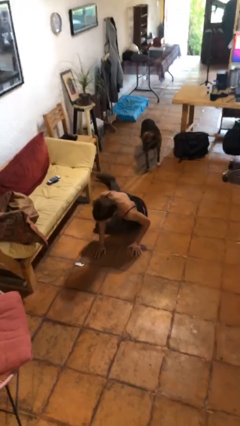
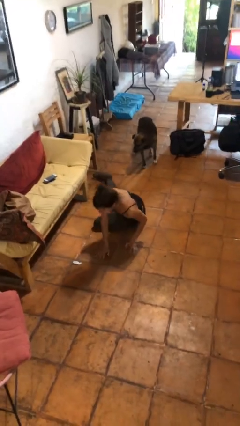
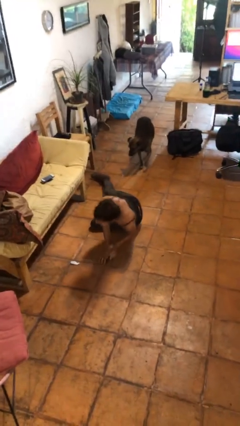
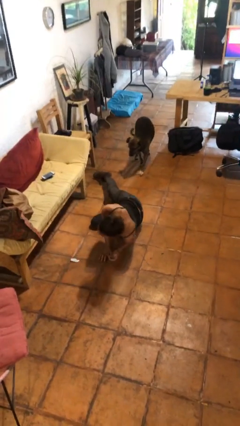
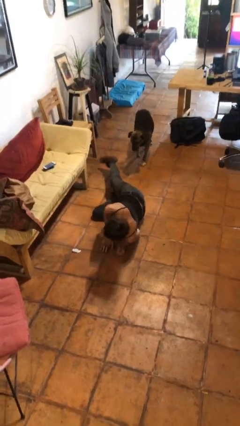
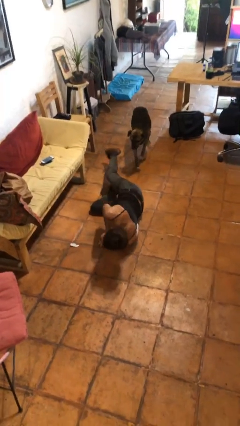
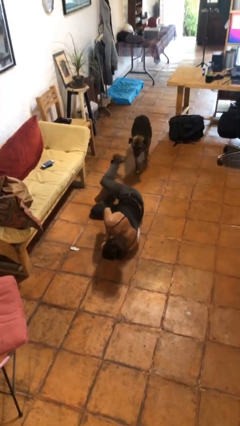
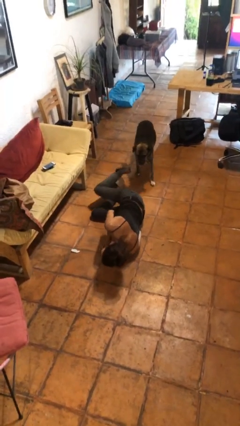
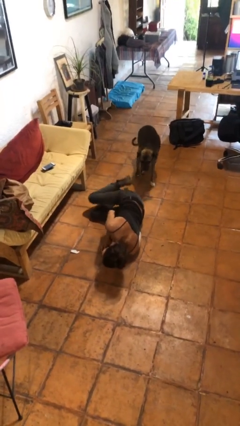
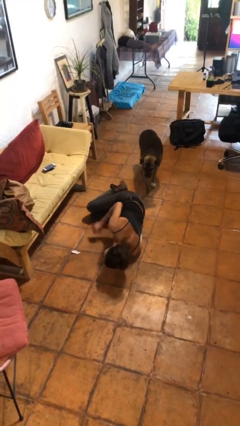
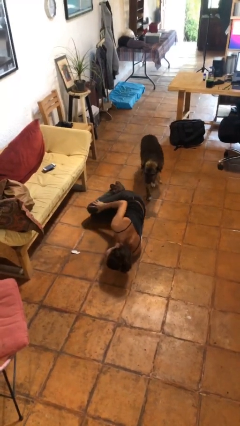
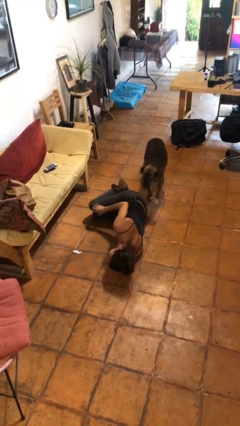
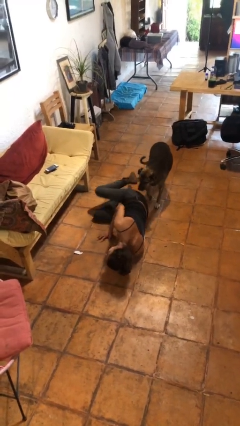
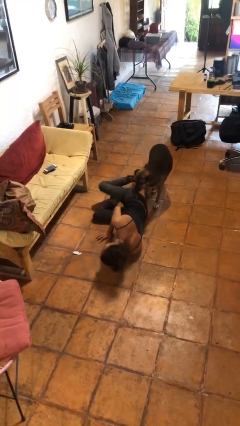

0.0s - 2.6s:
person lies down on floor

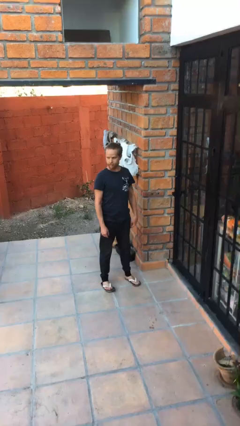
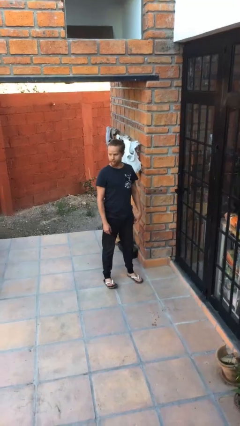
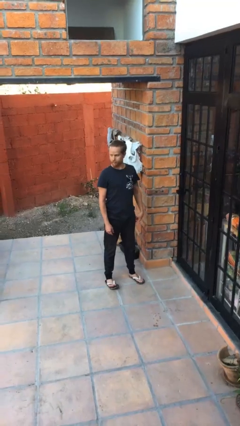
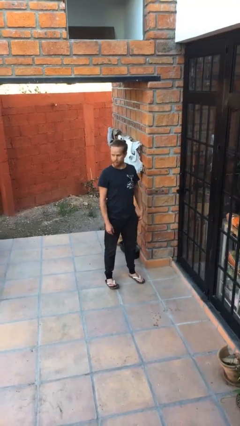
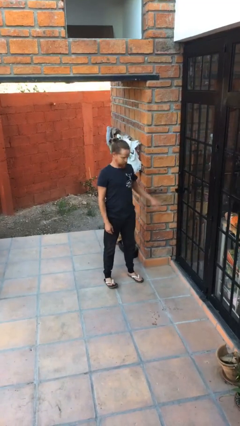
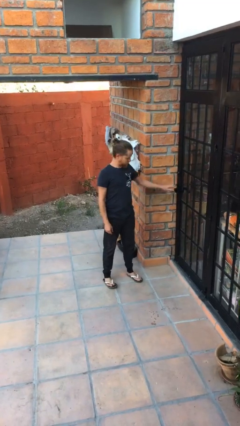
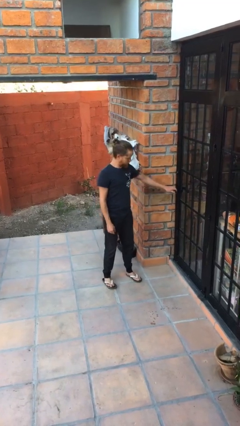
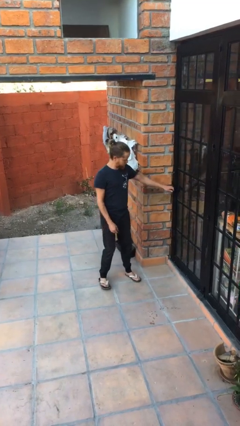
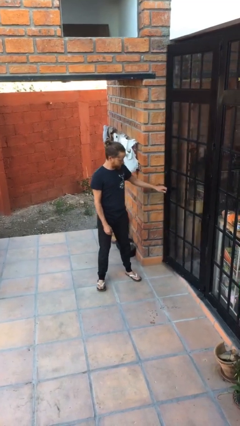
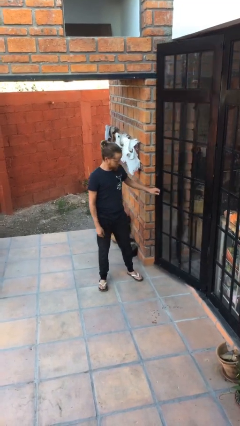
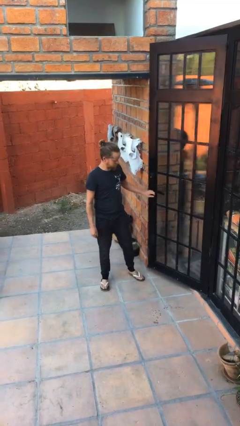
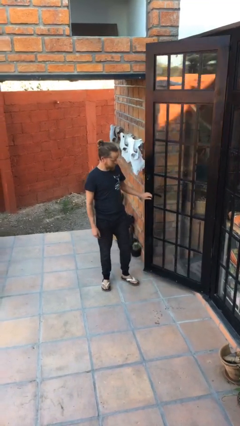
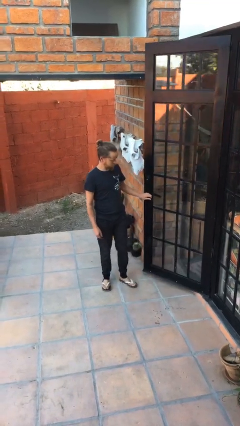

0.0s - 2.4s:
person opens facility door

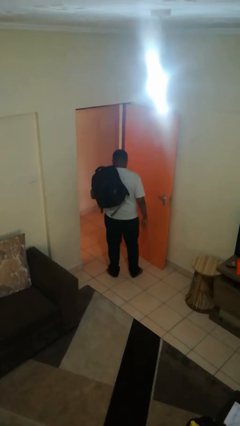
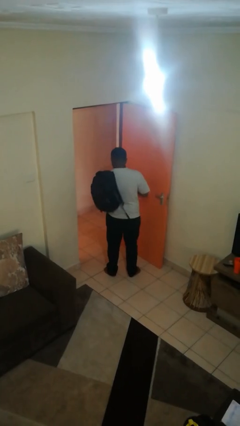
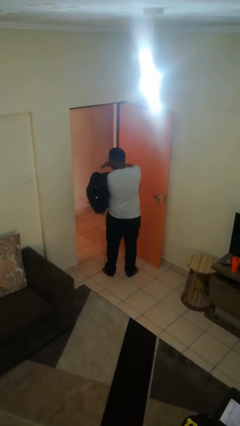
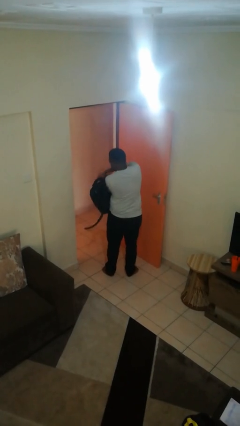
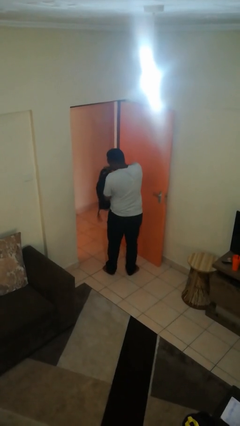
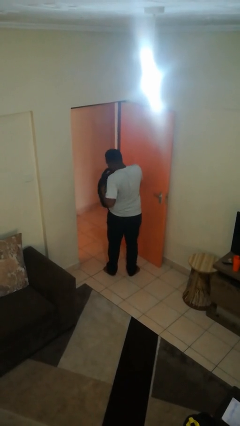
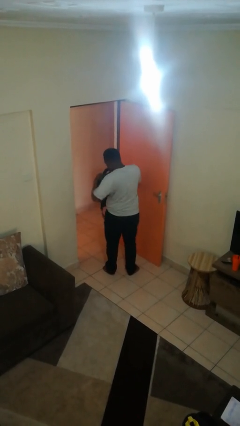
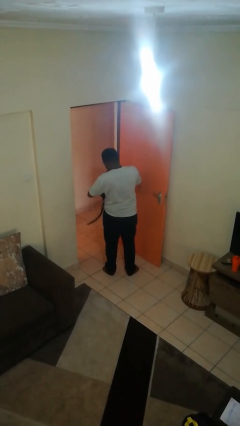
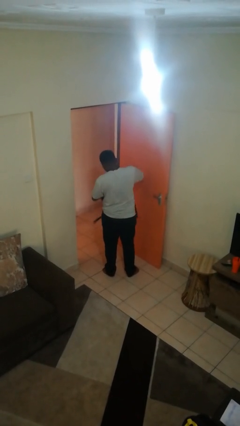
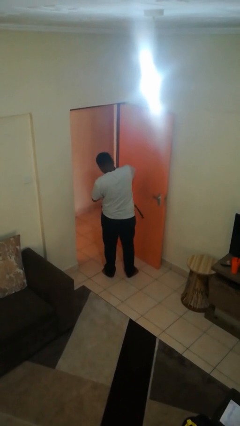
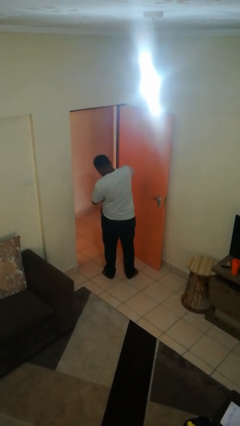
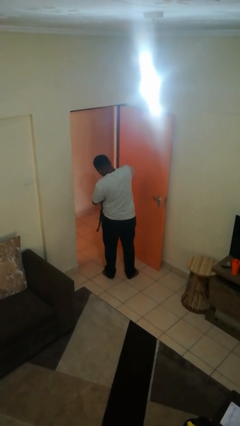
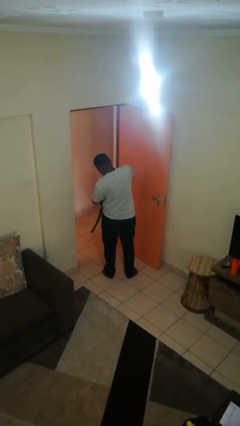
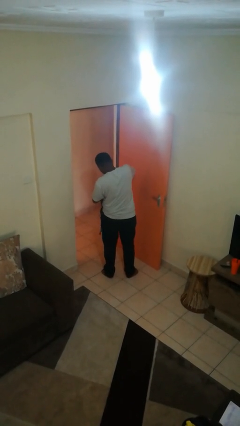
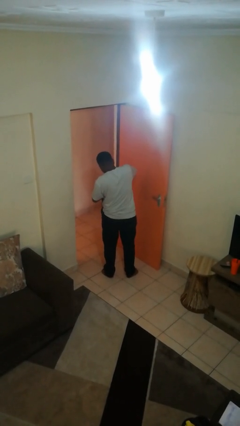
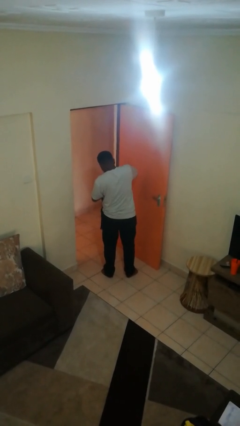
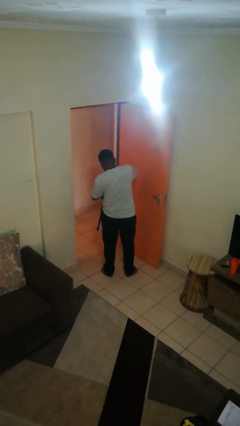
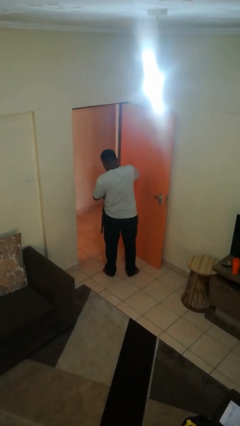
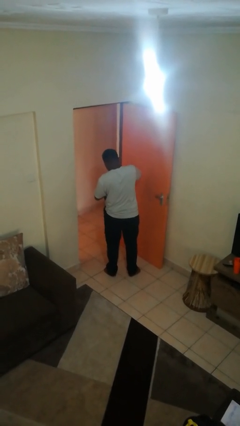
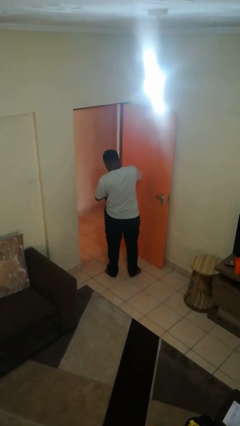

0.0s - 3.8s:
person searches in backpack

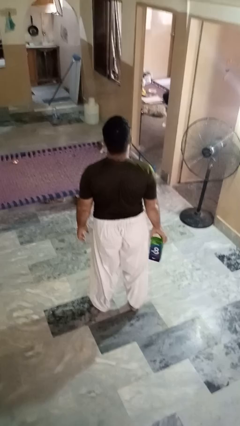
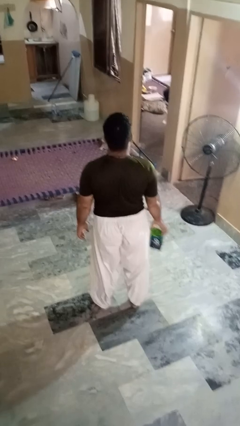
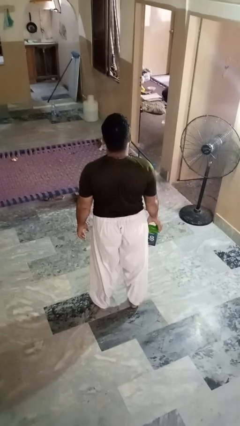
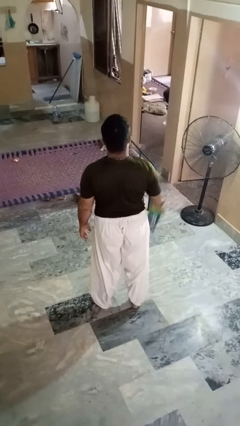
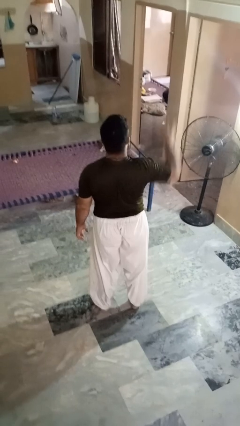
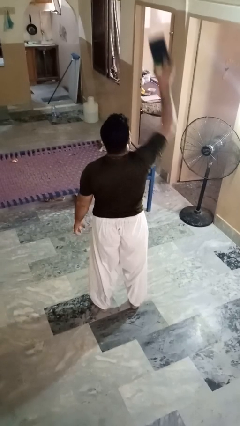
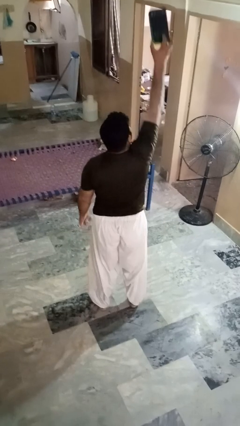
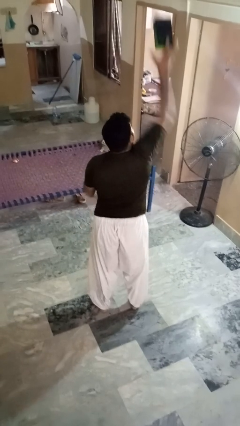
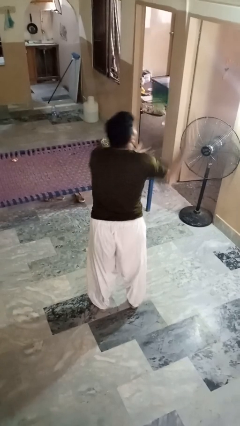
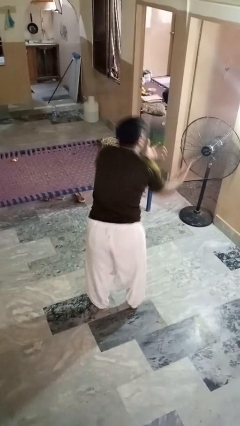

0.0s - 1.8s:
person drops object

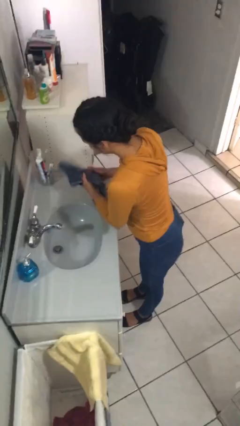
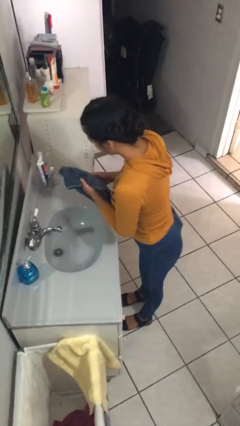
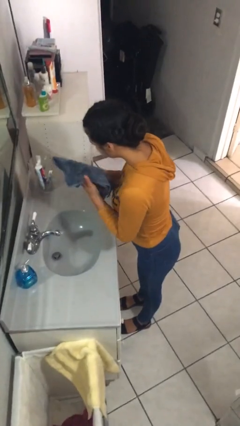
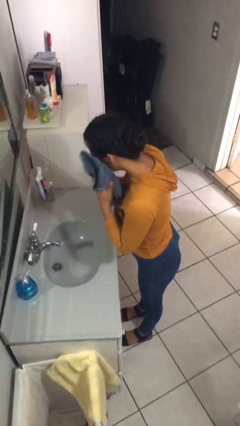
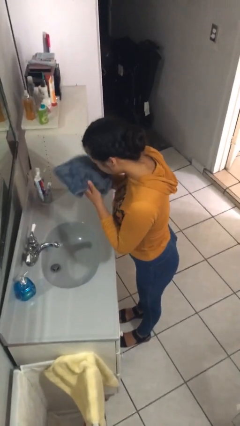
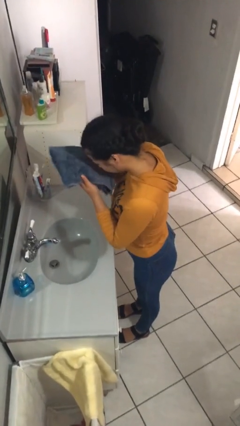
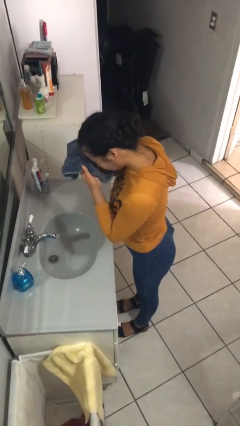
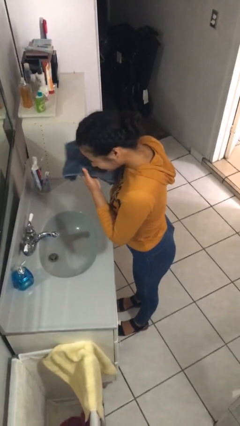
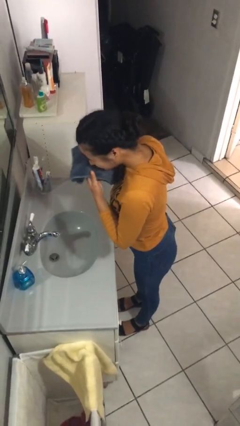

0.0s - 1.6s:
person dries face with towel

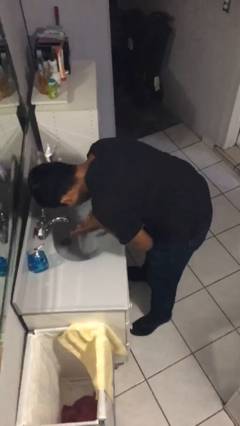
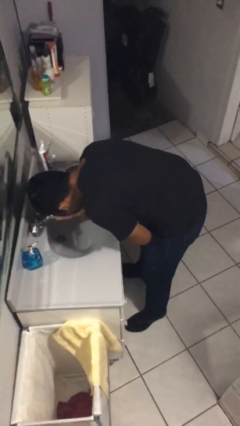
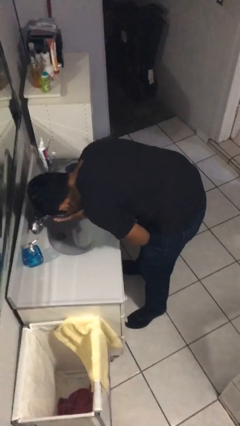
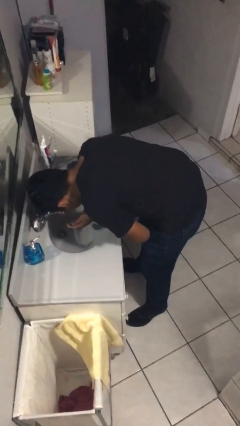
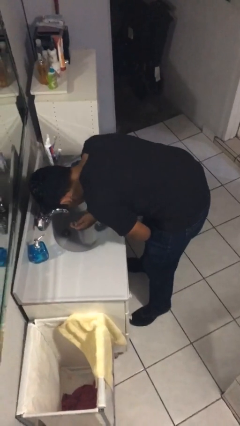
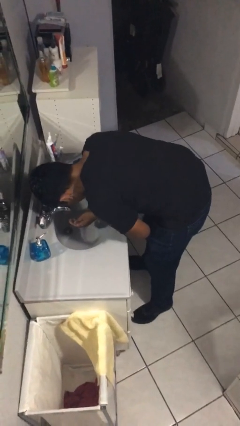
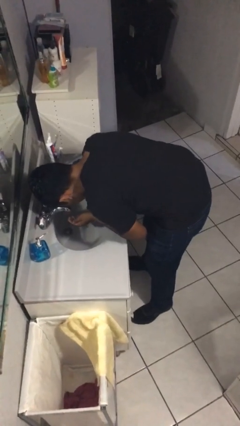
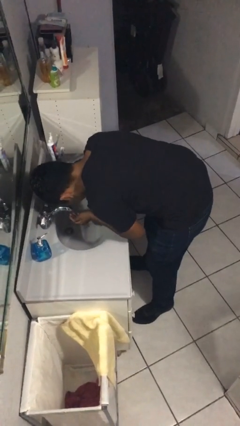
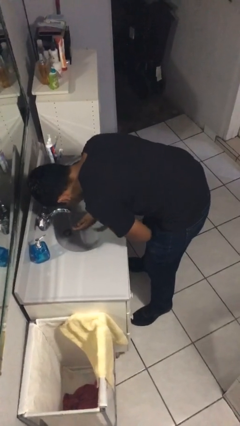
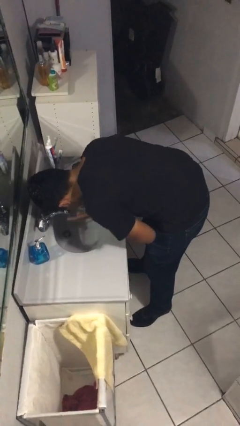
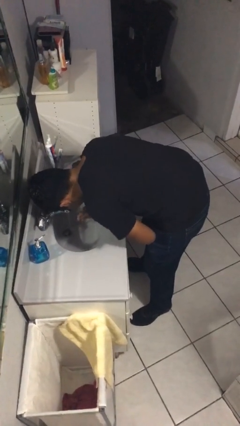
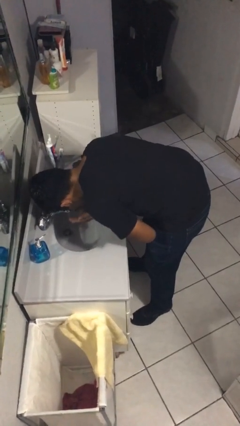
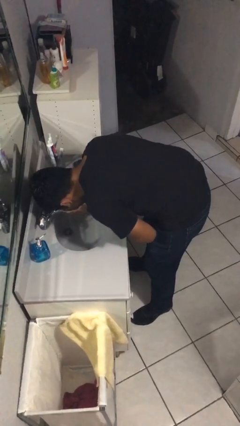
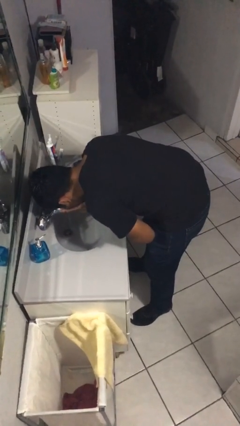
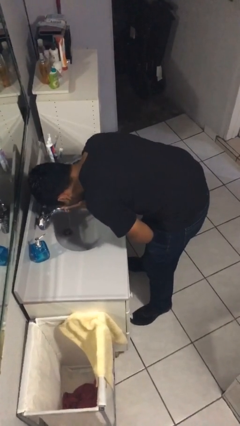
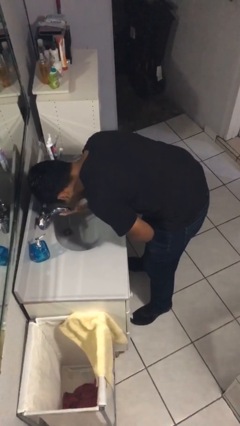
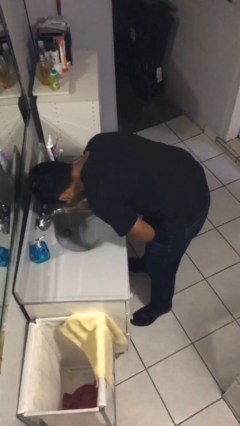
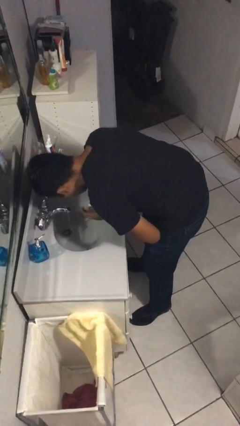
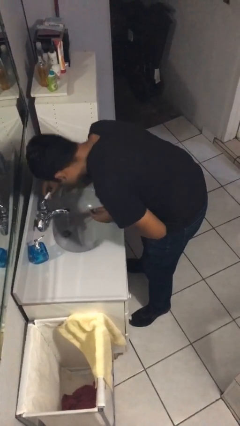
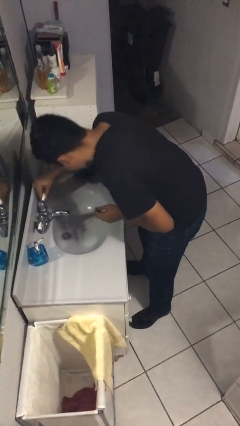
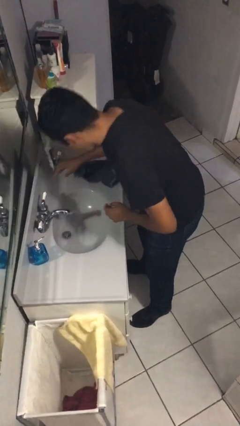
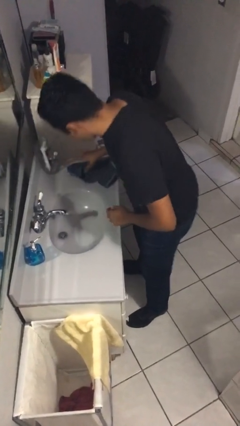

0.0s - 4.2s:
person washes face

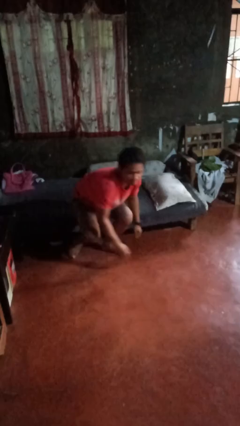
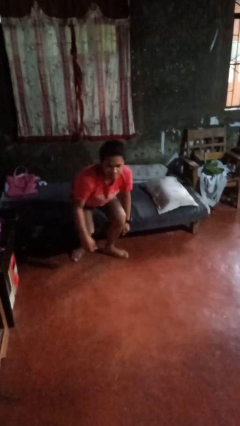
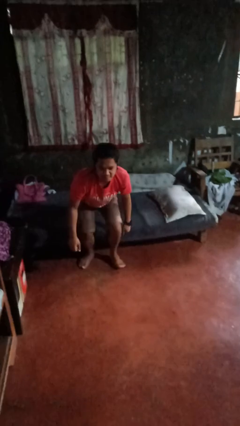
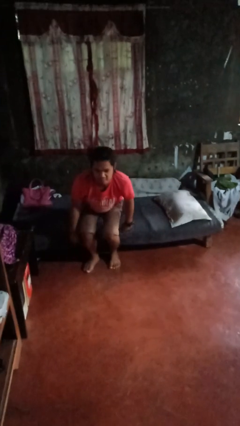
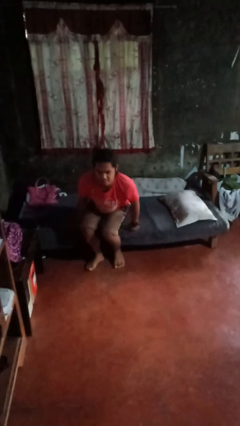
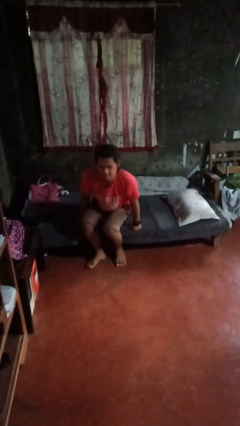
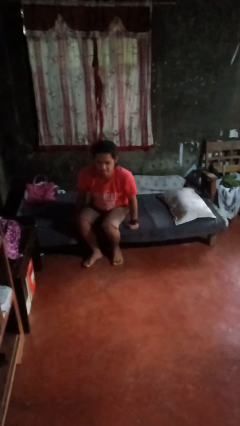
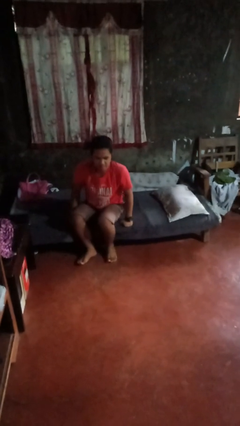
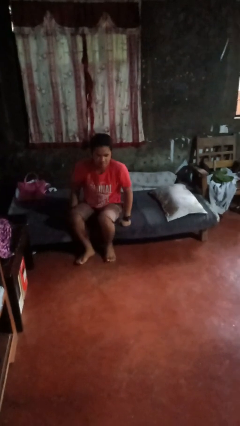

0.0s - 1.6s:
person stands up from floor
